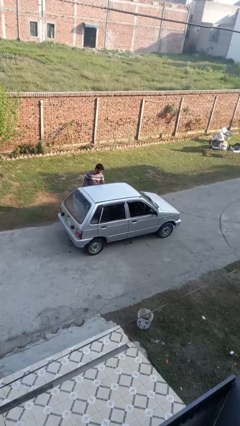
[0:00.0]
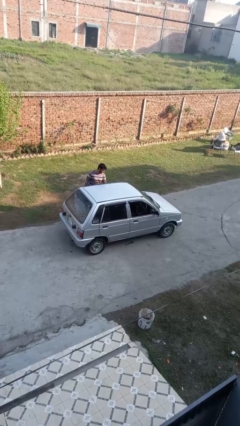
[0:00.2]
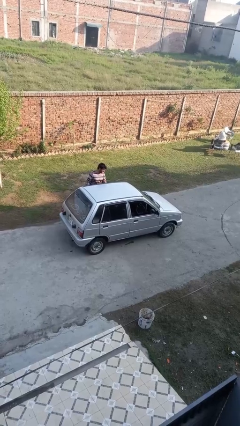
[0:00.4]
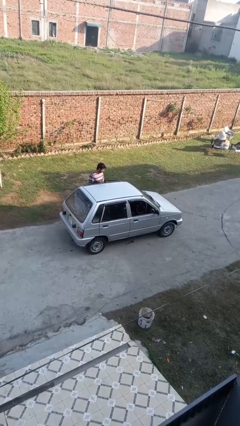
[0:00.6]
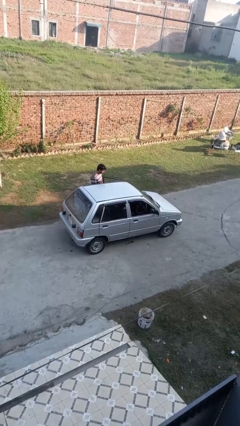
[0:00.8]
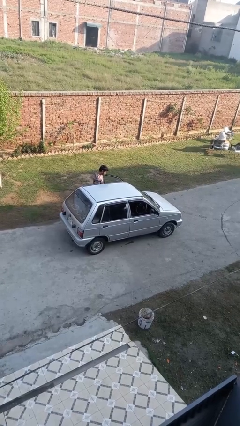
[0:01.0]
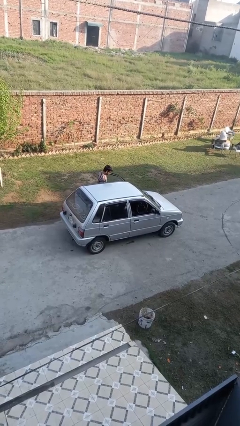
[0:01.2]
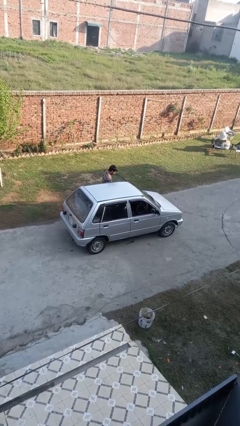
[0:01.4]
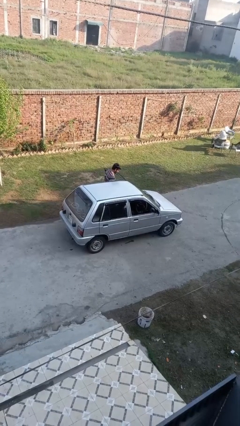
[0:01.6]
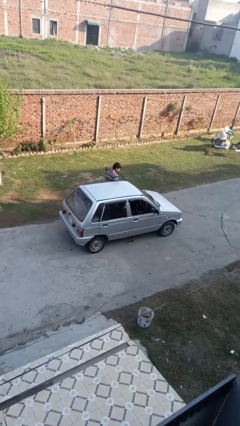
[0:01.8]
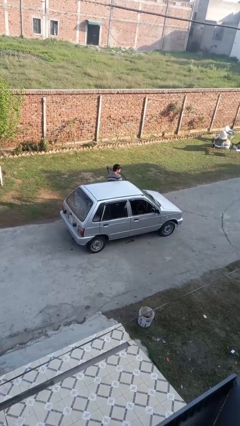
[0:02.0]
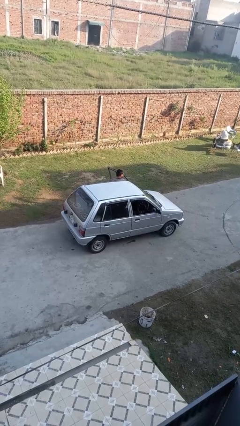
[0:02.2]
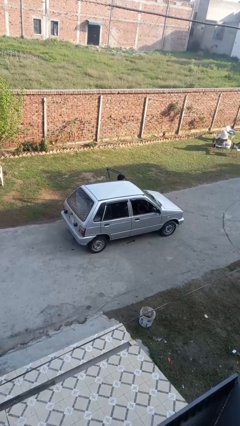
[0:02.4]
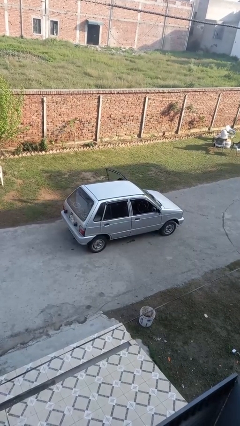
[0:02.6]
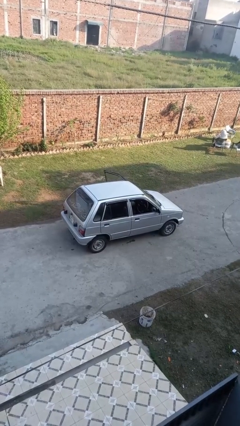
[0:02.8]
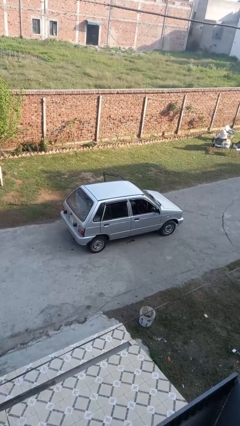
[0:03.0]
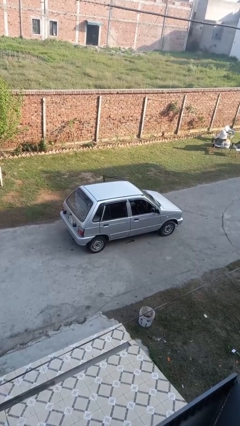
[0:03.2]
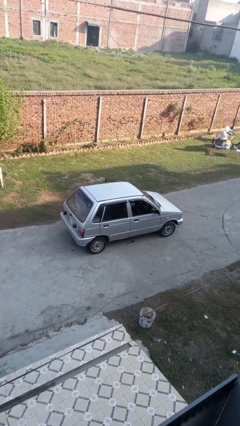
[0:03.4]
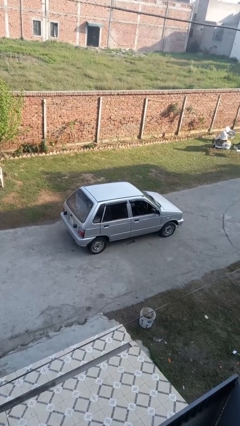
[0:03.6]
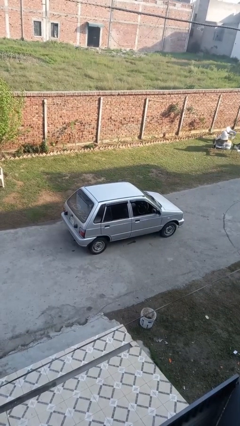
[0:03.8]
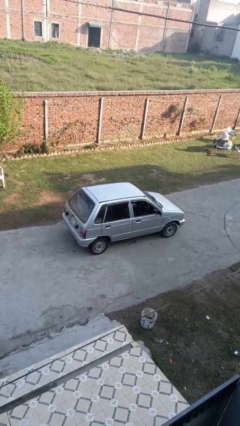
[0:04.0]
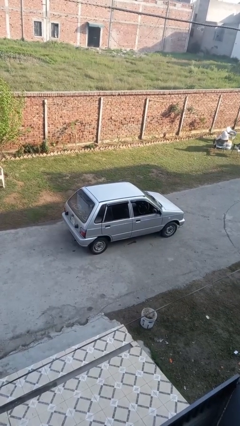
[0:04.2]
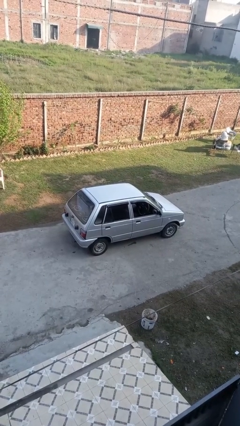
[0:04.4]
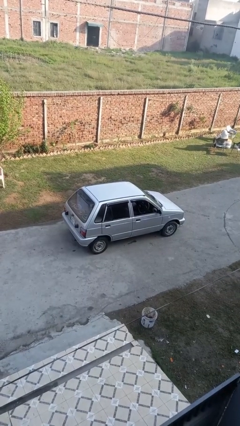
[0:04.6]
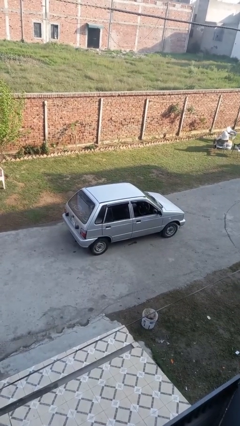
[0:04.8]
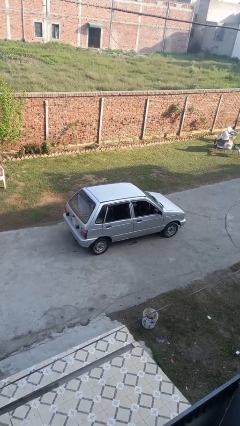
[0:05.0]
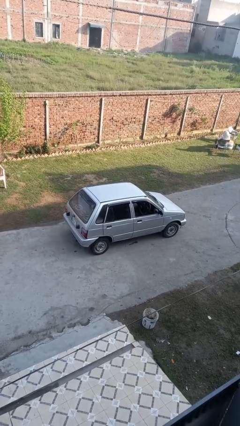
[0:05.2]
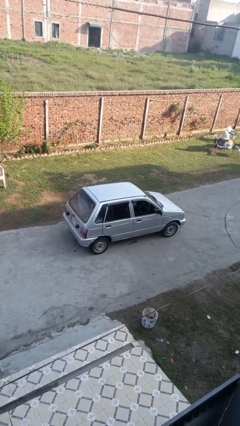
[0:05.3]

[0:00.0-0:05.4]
car picks up person

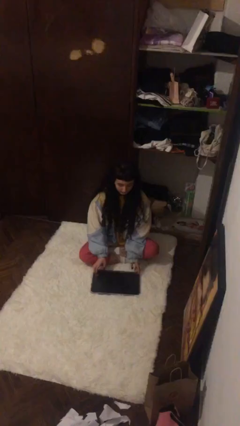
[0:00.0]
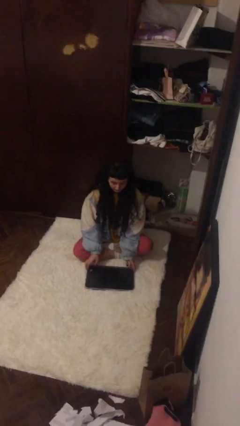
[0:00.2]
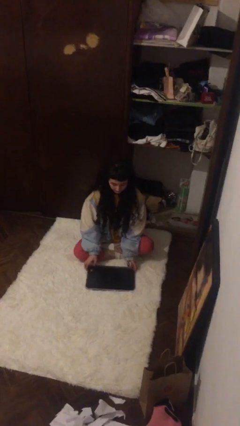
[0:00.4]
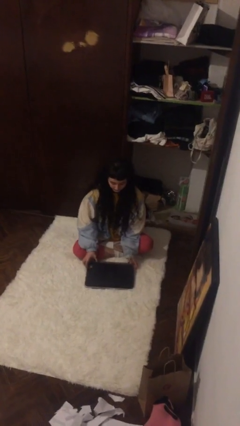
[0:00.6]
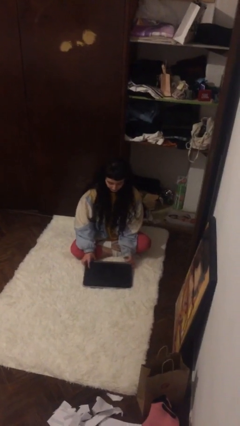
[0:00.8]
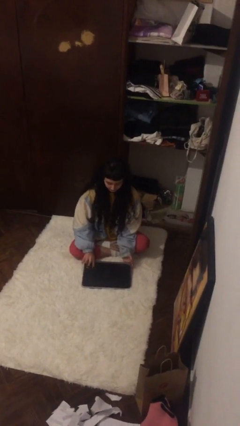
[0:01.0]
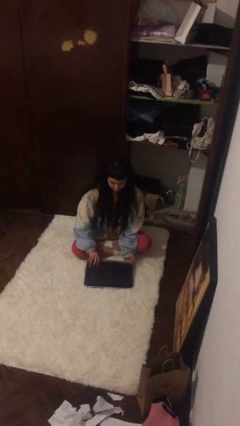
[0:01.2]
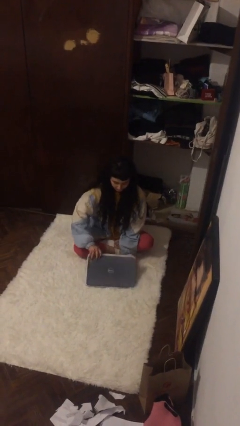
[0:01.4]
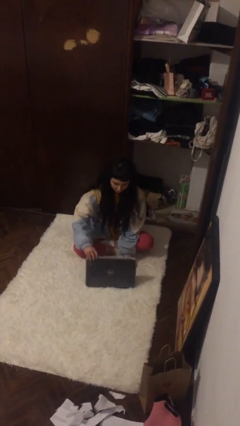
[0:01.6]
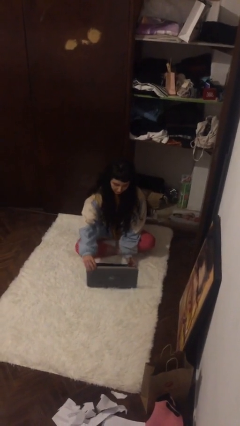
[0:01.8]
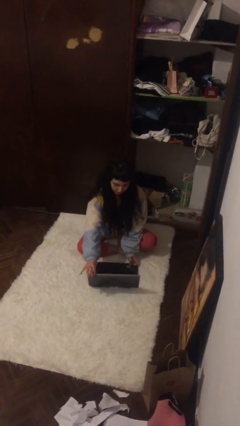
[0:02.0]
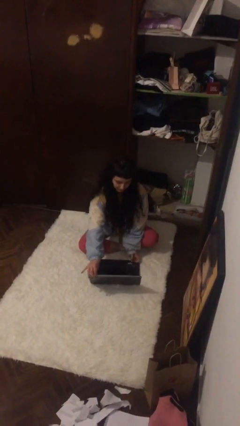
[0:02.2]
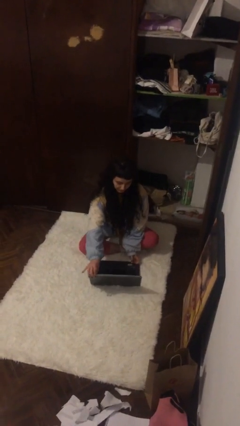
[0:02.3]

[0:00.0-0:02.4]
person opens laptop

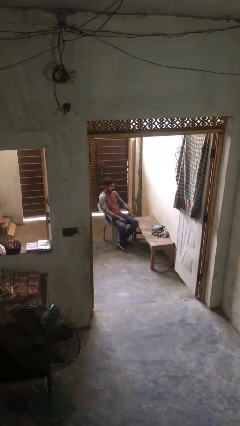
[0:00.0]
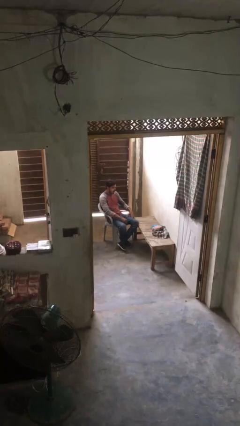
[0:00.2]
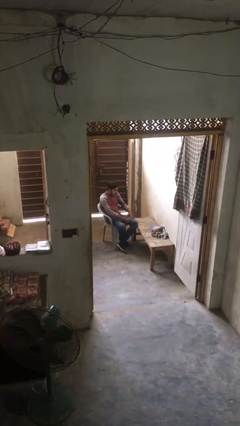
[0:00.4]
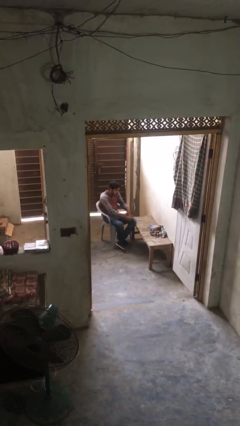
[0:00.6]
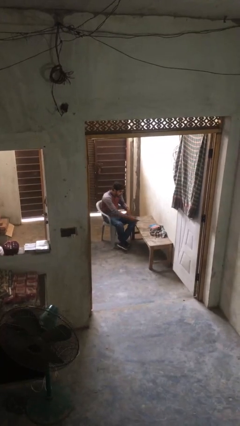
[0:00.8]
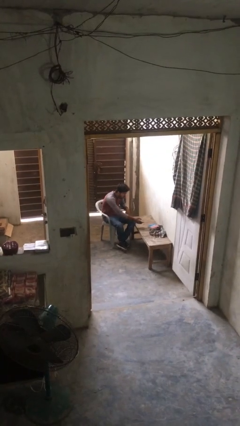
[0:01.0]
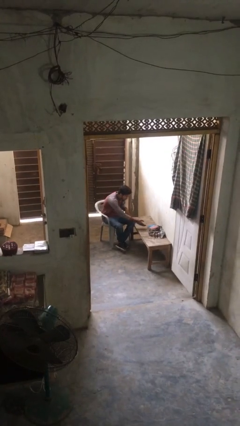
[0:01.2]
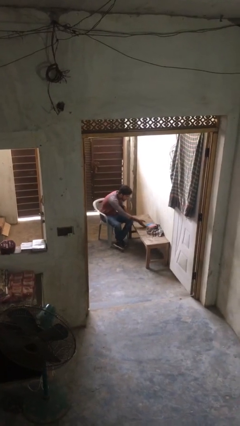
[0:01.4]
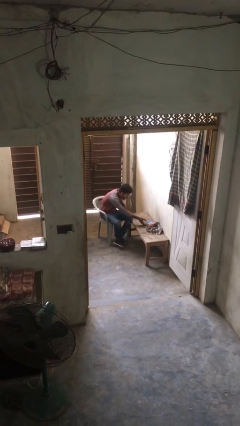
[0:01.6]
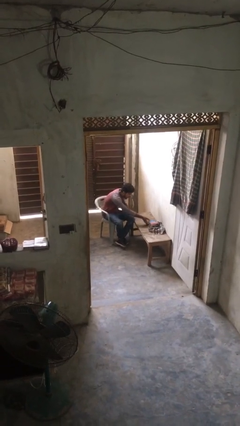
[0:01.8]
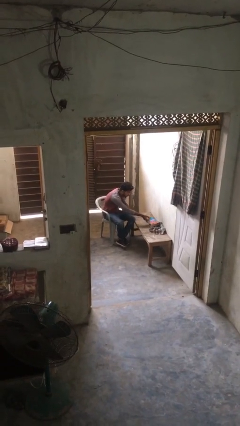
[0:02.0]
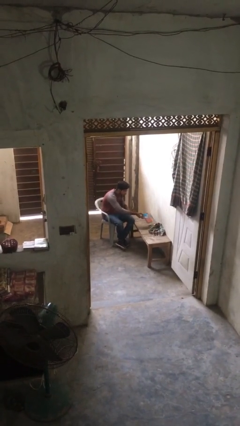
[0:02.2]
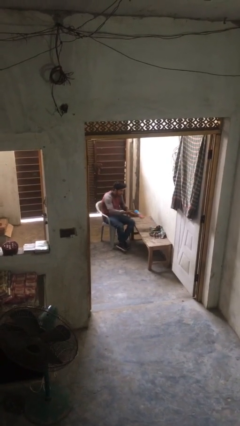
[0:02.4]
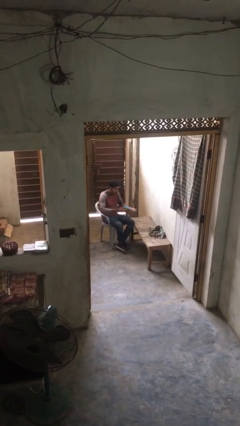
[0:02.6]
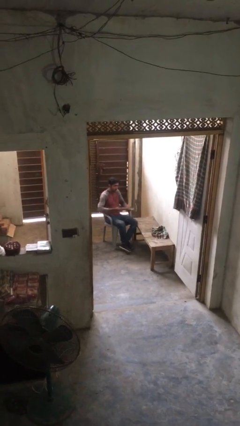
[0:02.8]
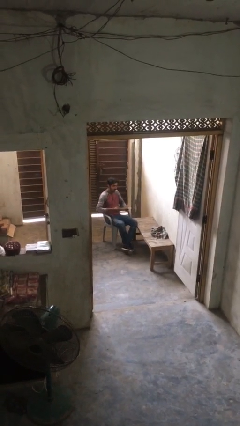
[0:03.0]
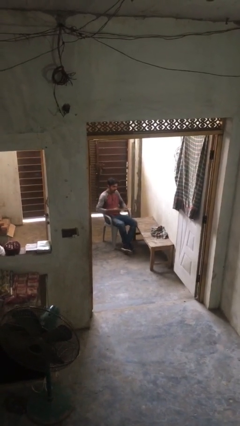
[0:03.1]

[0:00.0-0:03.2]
person picks up object from table

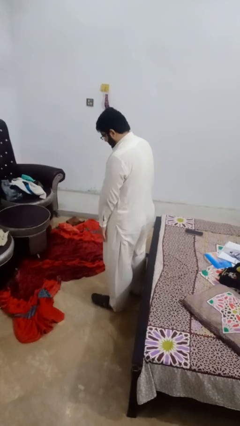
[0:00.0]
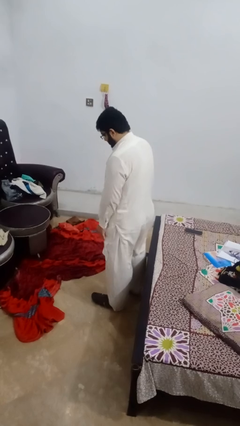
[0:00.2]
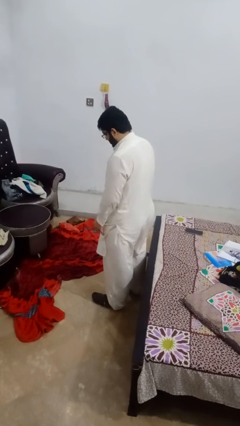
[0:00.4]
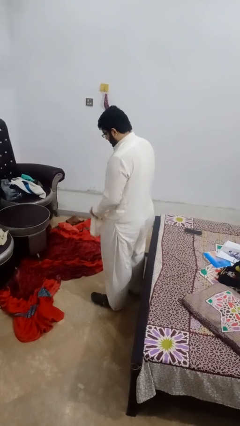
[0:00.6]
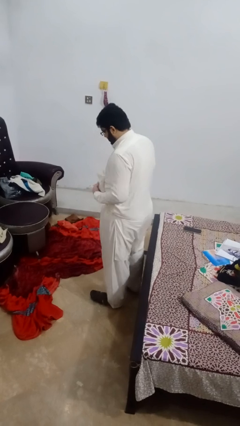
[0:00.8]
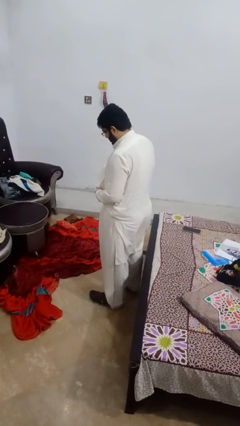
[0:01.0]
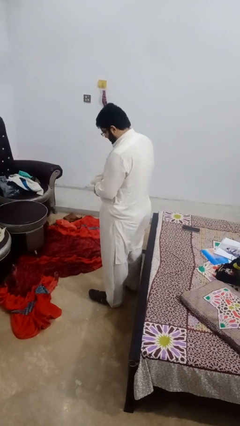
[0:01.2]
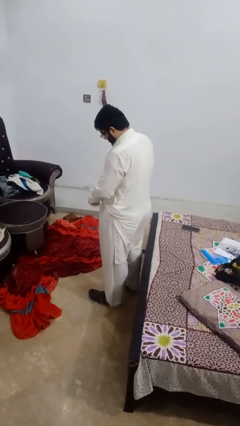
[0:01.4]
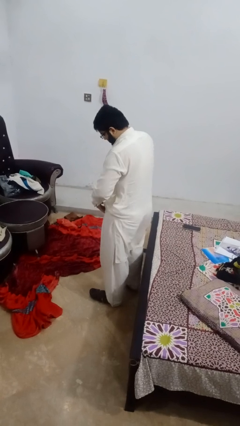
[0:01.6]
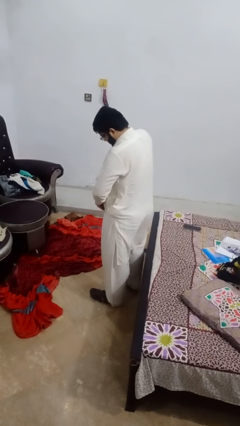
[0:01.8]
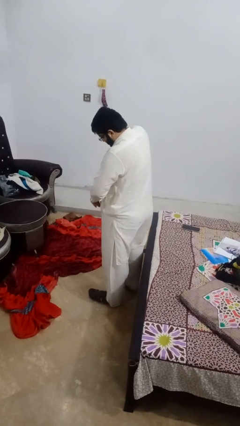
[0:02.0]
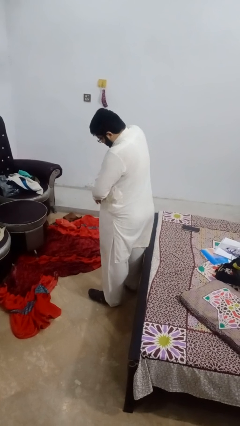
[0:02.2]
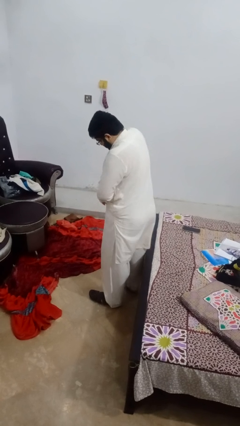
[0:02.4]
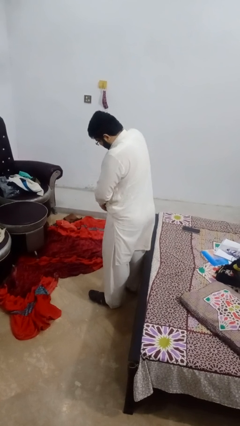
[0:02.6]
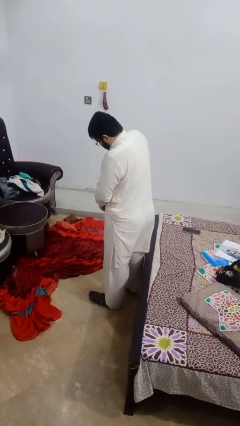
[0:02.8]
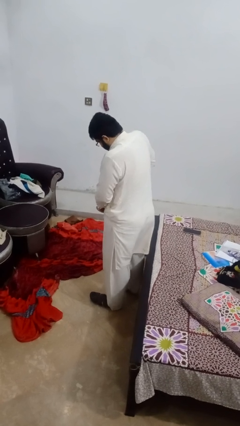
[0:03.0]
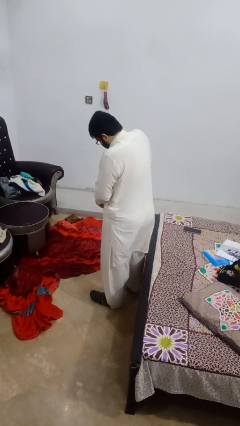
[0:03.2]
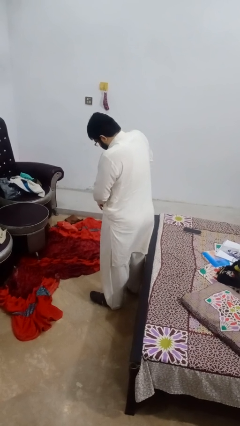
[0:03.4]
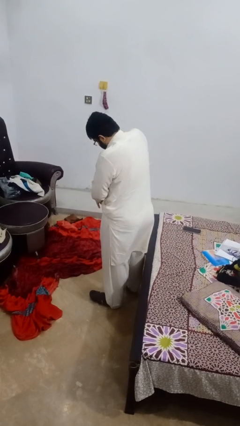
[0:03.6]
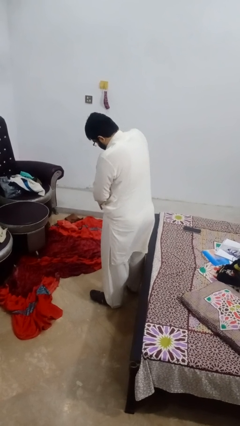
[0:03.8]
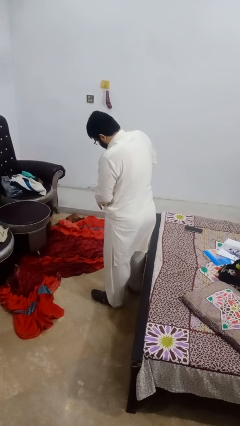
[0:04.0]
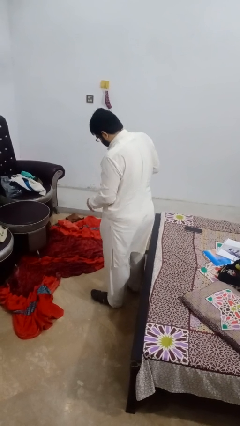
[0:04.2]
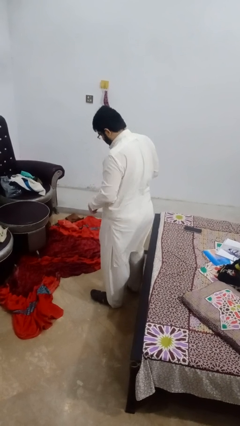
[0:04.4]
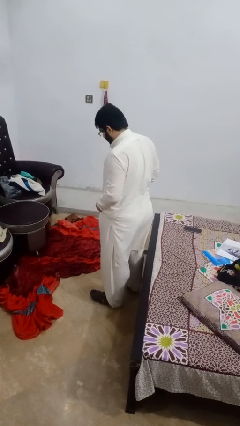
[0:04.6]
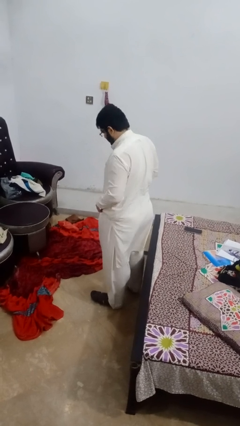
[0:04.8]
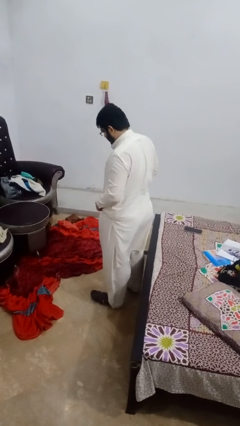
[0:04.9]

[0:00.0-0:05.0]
person tucks in shirt

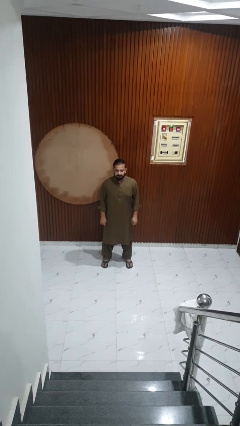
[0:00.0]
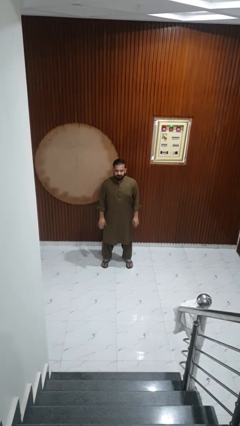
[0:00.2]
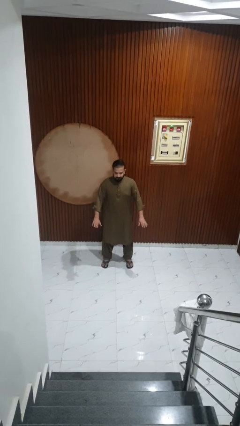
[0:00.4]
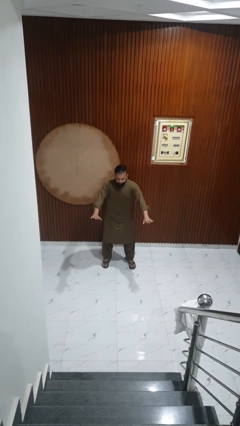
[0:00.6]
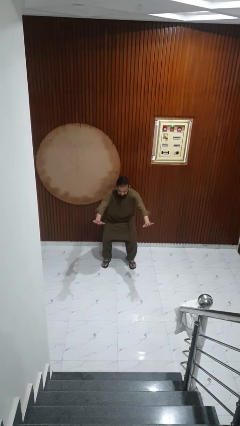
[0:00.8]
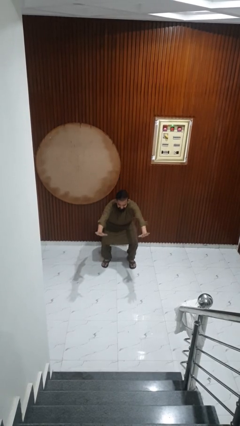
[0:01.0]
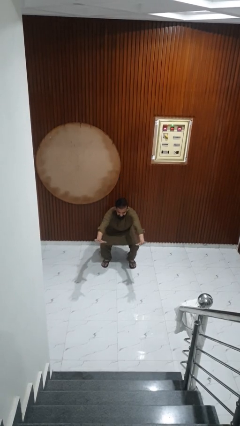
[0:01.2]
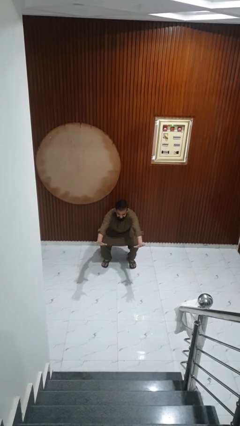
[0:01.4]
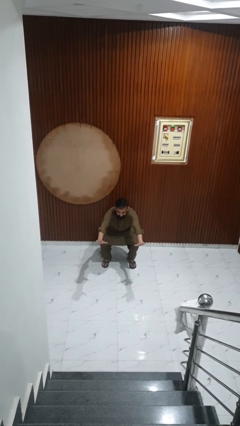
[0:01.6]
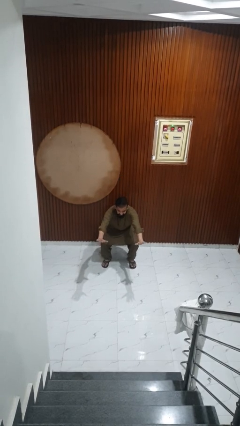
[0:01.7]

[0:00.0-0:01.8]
person squats
